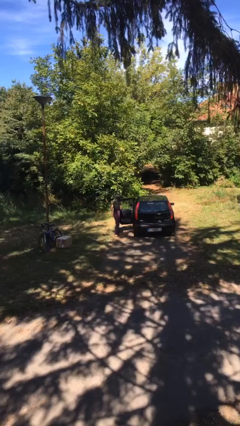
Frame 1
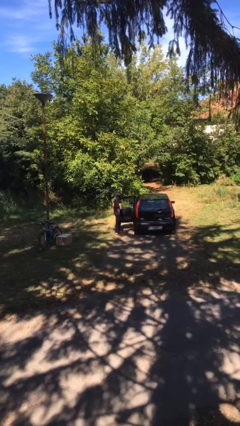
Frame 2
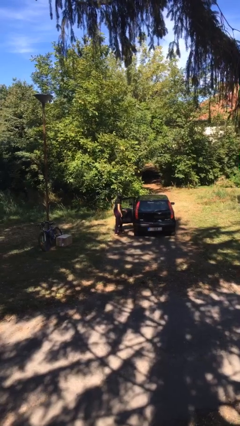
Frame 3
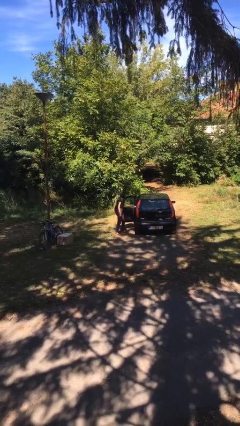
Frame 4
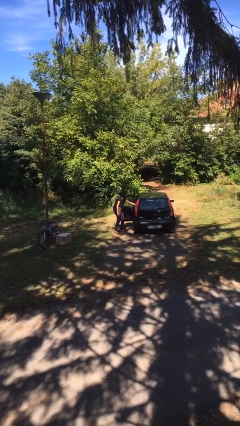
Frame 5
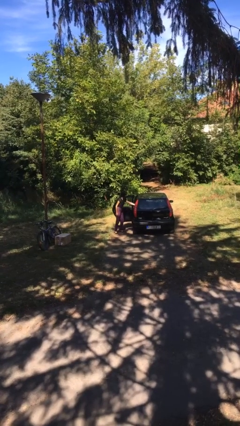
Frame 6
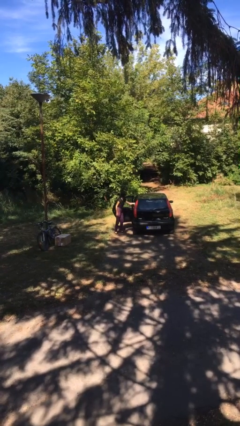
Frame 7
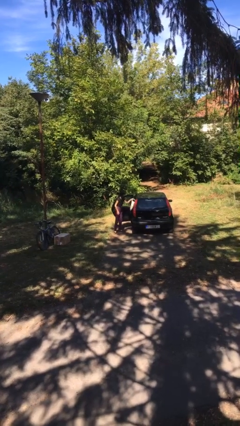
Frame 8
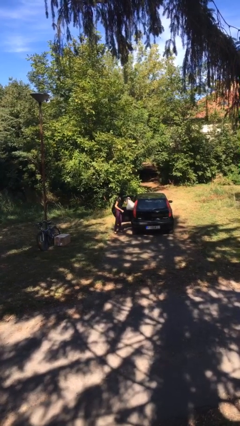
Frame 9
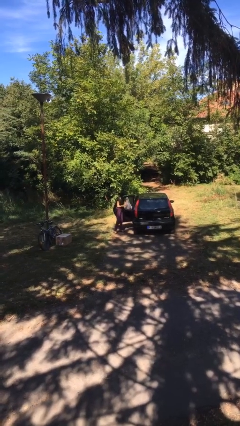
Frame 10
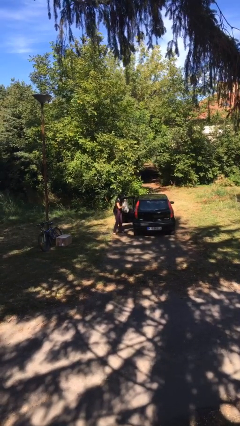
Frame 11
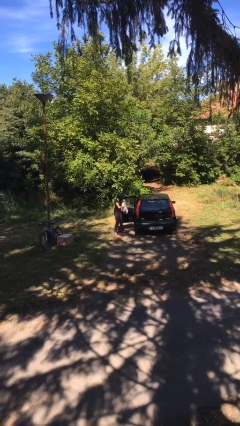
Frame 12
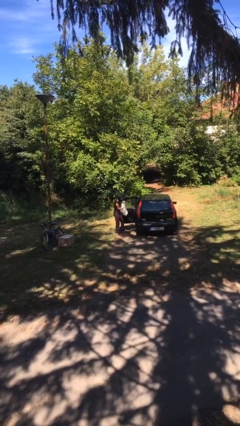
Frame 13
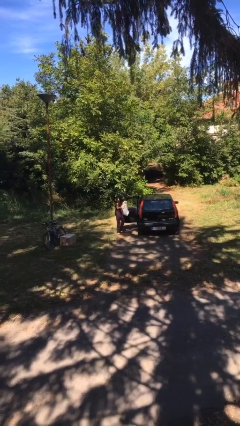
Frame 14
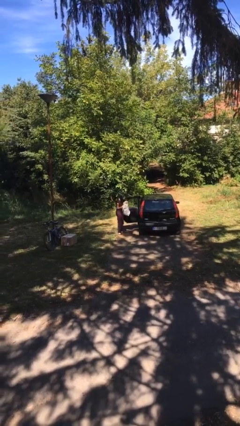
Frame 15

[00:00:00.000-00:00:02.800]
person unloads car

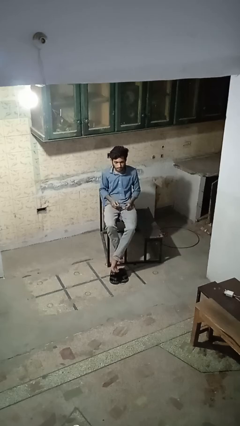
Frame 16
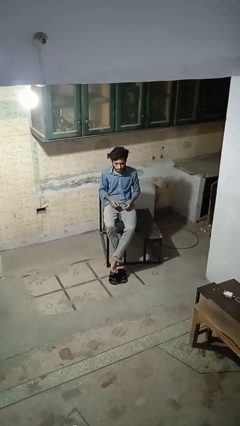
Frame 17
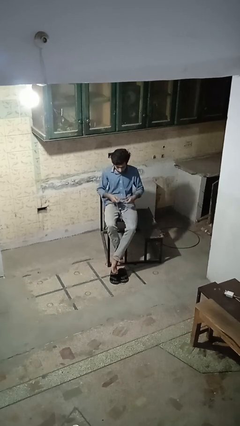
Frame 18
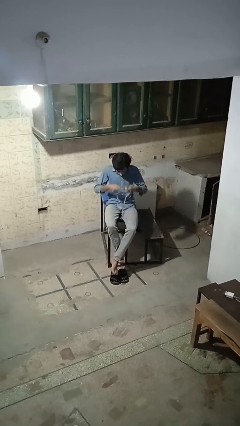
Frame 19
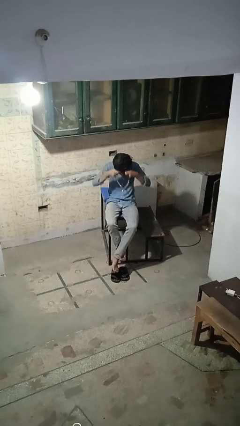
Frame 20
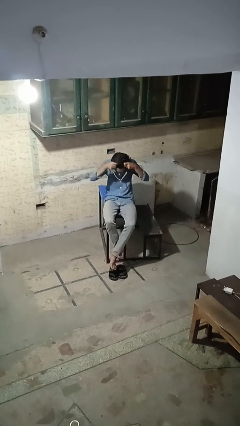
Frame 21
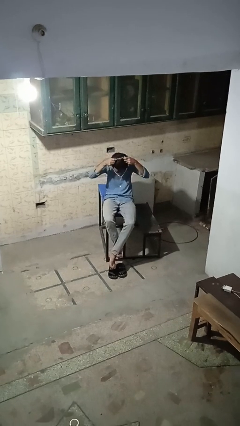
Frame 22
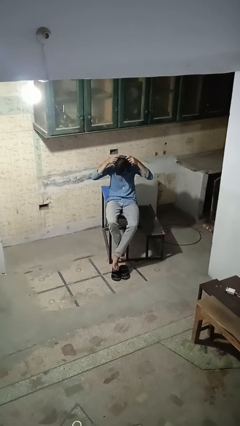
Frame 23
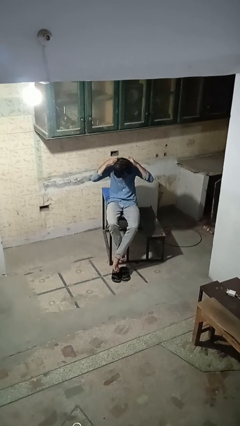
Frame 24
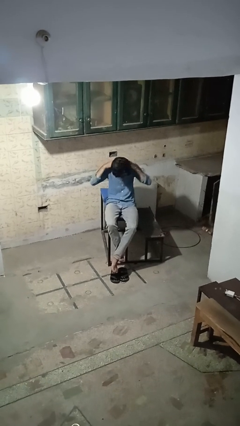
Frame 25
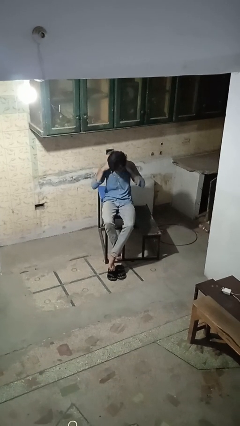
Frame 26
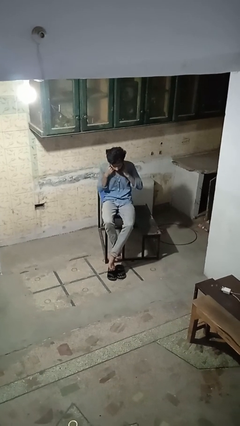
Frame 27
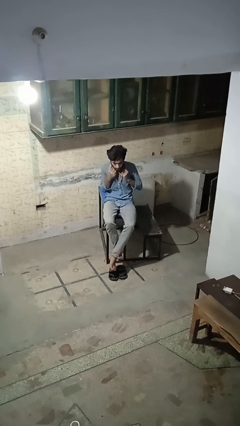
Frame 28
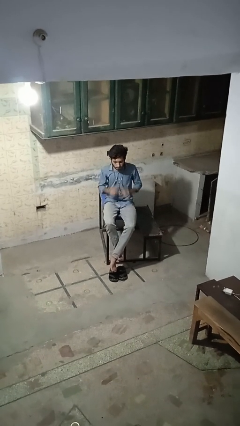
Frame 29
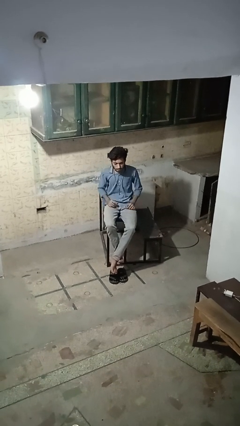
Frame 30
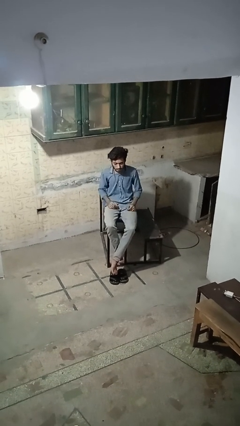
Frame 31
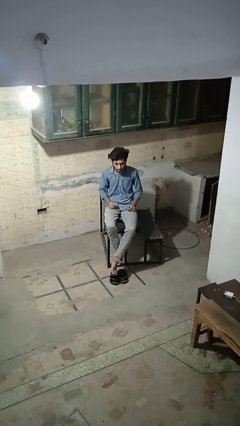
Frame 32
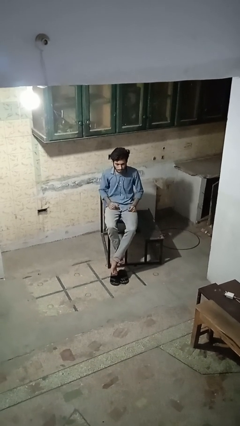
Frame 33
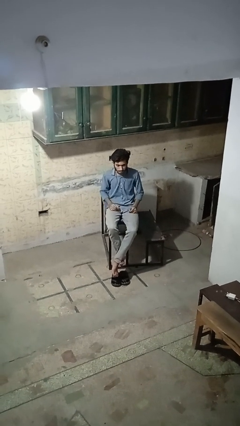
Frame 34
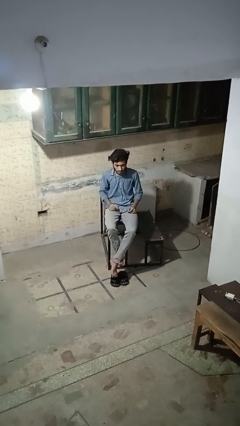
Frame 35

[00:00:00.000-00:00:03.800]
person puts on necklace

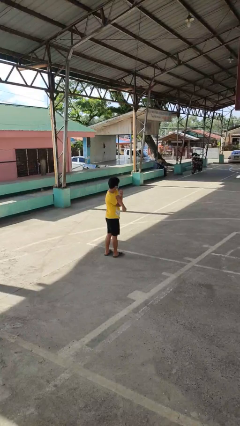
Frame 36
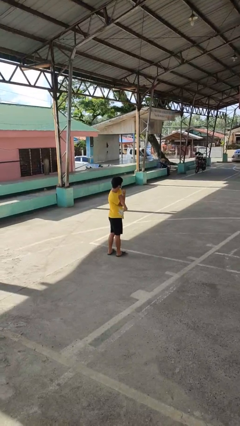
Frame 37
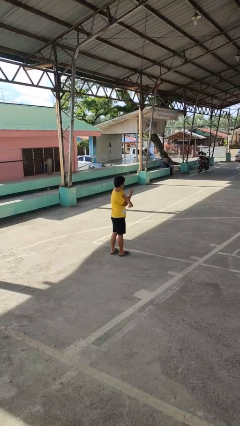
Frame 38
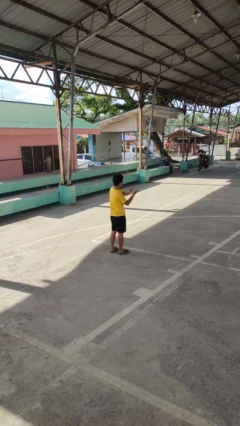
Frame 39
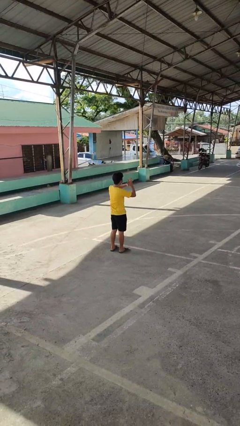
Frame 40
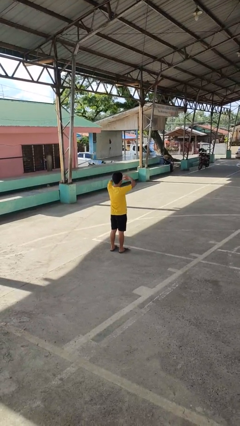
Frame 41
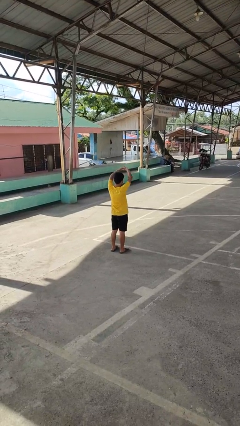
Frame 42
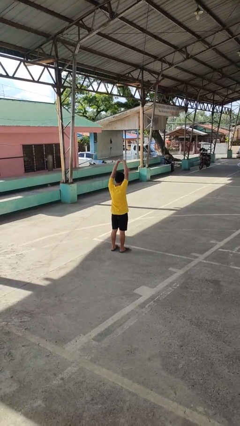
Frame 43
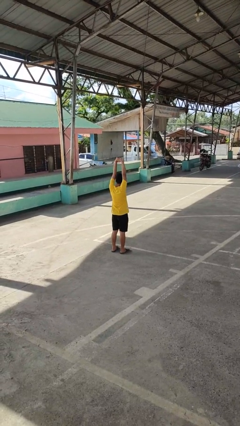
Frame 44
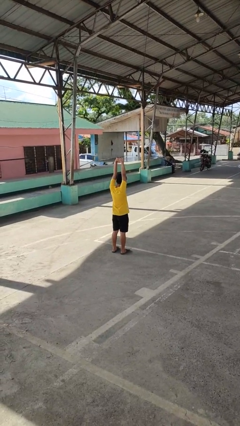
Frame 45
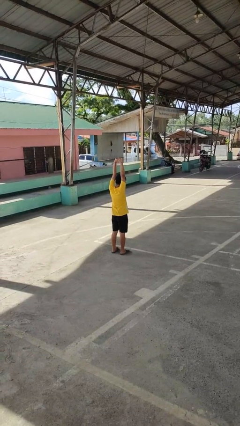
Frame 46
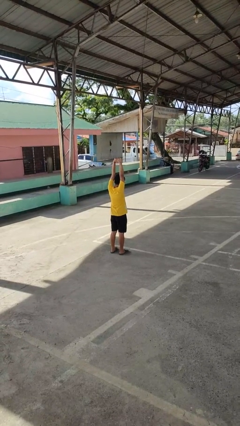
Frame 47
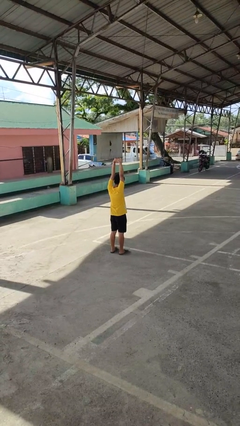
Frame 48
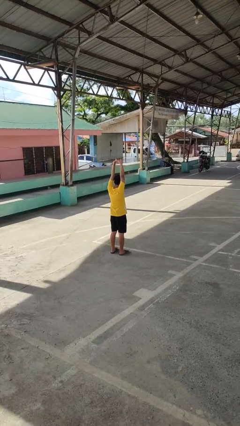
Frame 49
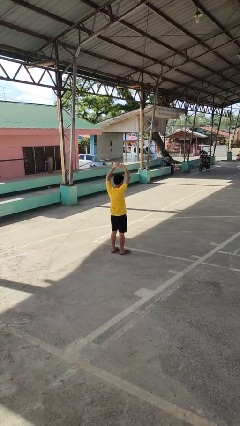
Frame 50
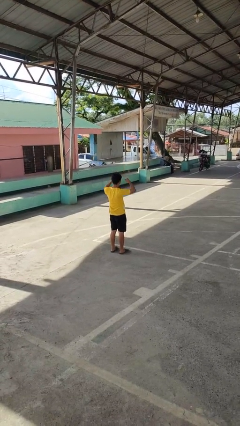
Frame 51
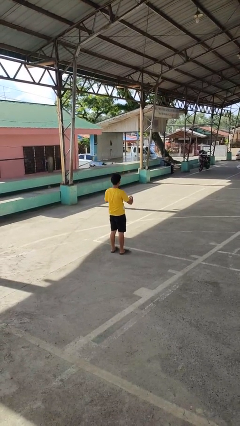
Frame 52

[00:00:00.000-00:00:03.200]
person stretches arms over head

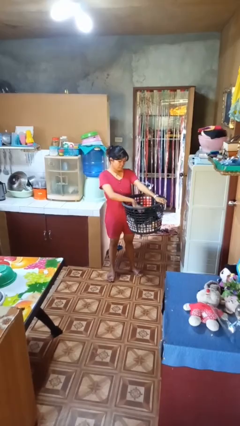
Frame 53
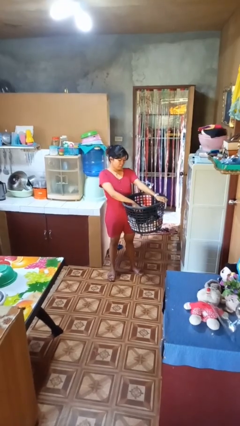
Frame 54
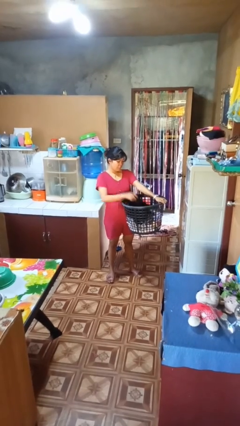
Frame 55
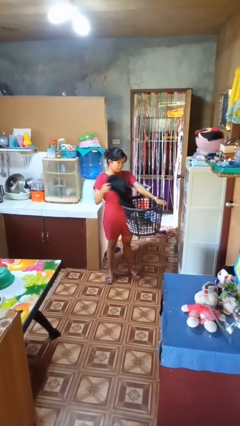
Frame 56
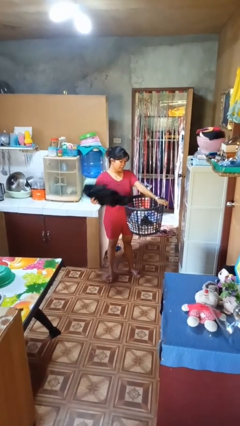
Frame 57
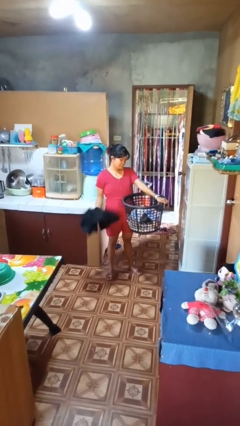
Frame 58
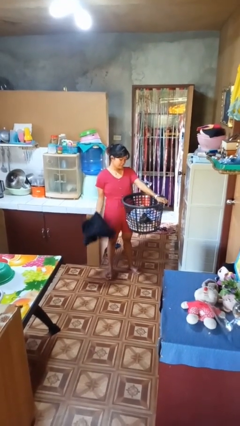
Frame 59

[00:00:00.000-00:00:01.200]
person takes object from basket

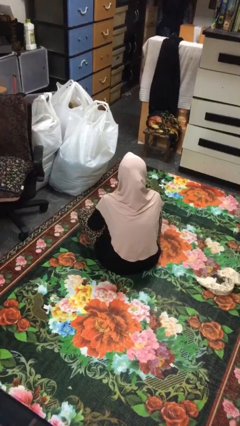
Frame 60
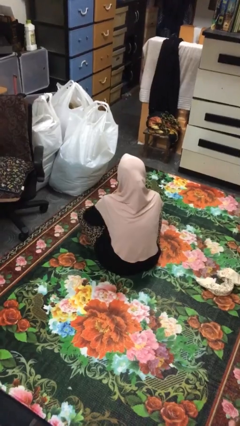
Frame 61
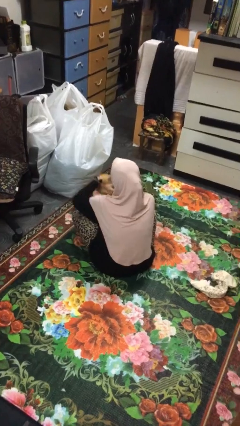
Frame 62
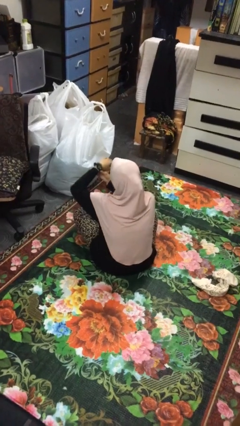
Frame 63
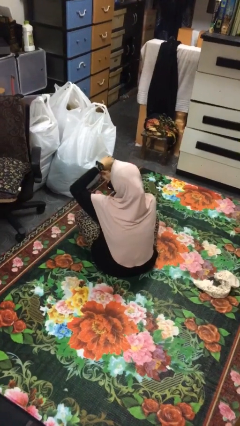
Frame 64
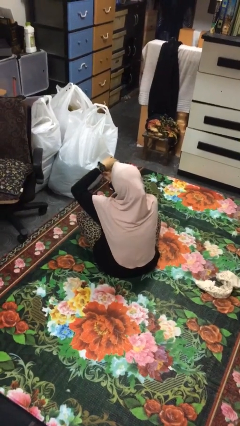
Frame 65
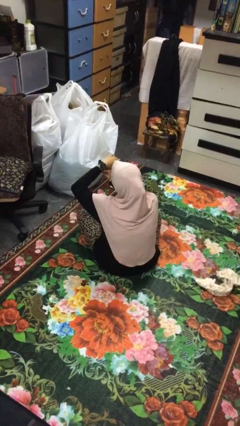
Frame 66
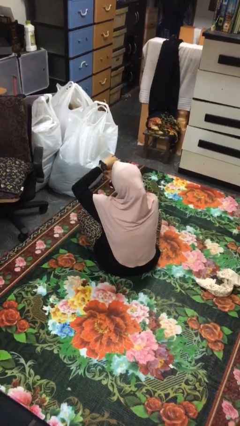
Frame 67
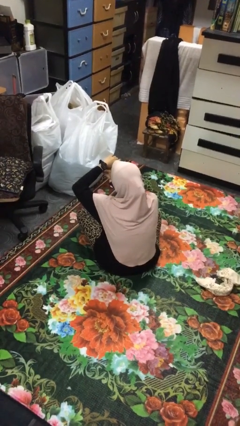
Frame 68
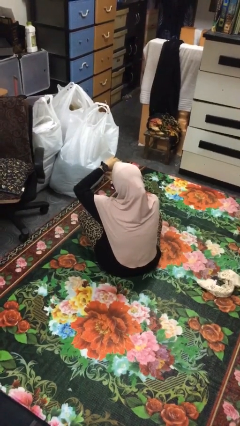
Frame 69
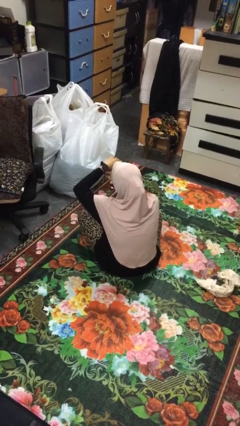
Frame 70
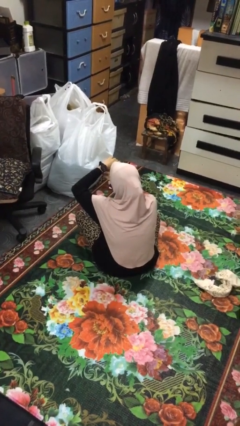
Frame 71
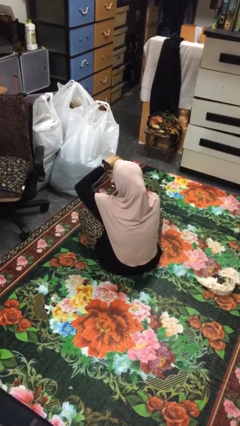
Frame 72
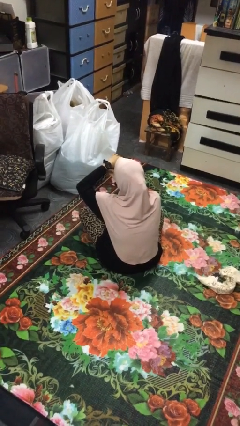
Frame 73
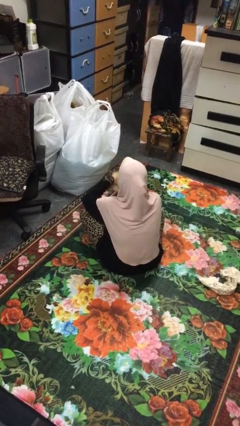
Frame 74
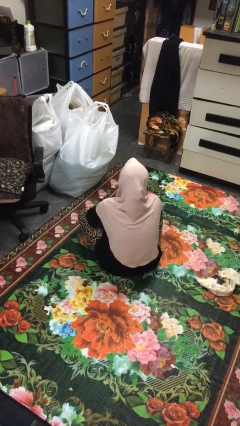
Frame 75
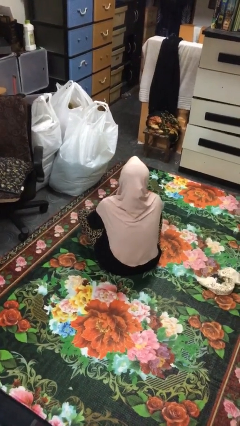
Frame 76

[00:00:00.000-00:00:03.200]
person looks at wristwatch

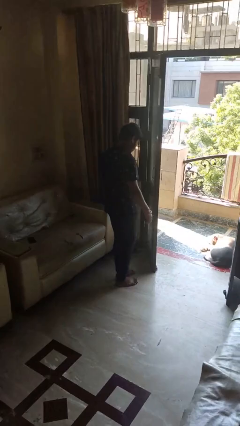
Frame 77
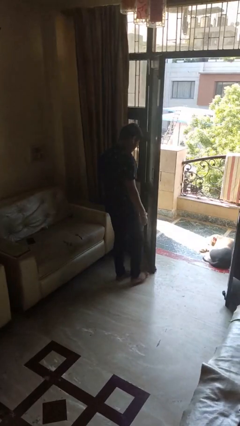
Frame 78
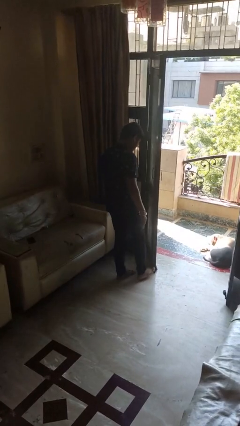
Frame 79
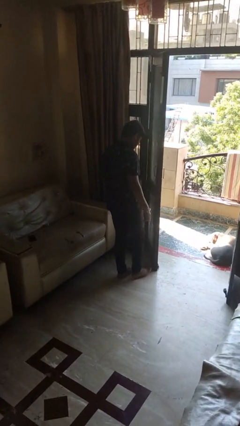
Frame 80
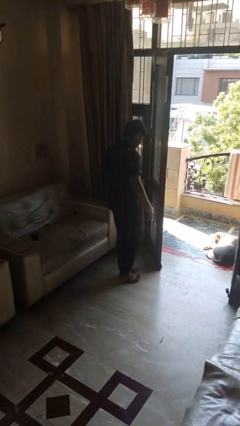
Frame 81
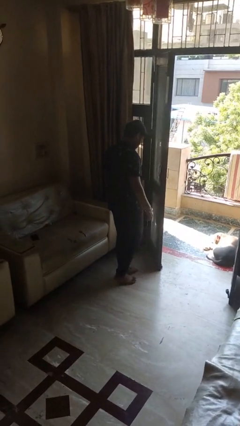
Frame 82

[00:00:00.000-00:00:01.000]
person stubs toe

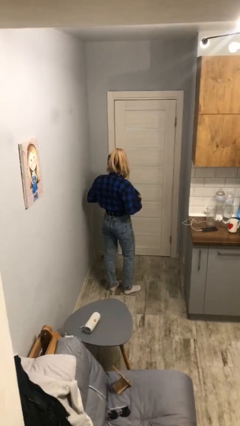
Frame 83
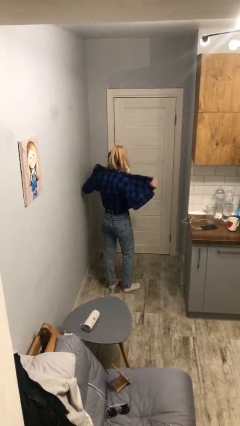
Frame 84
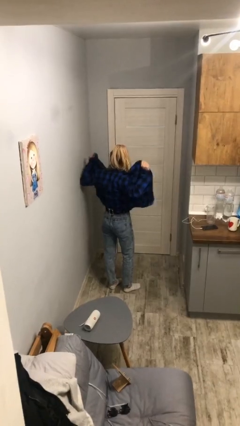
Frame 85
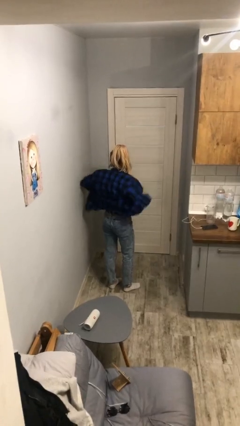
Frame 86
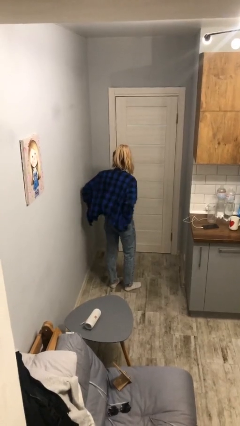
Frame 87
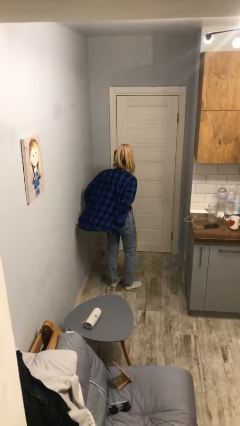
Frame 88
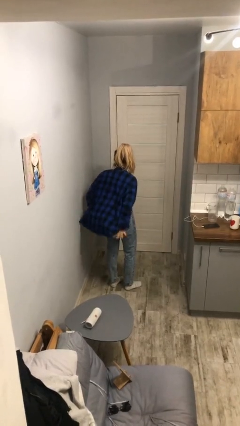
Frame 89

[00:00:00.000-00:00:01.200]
person untucks shirt

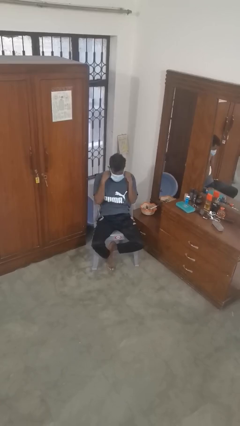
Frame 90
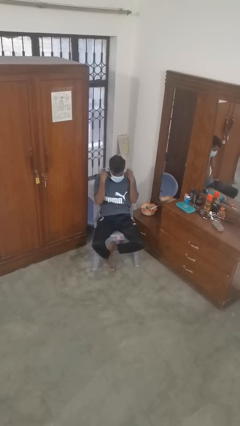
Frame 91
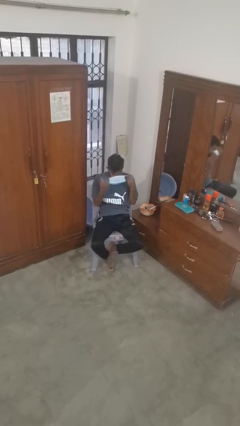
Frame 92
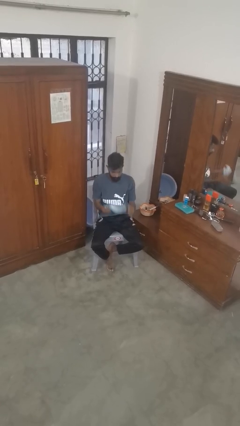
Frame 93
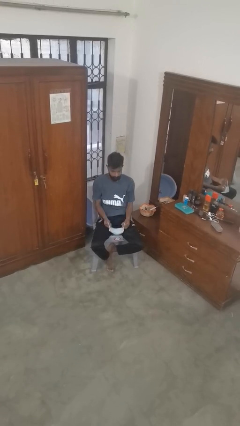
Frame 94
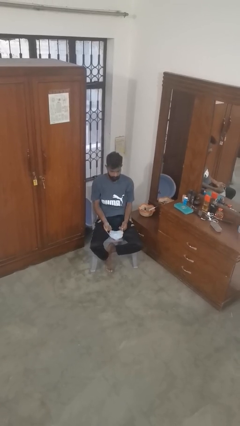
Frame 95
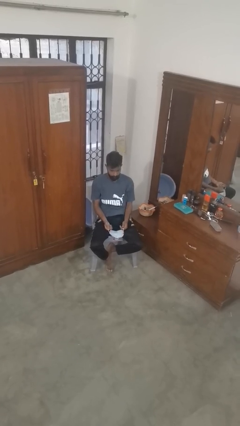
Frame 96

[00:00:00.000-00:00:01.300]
person takes off facemask
